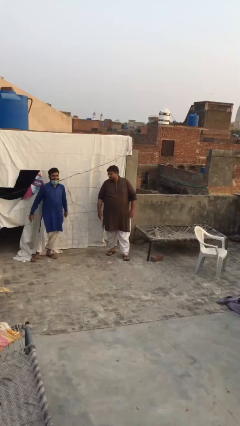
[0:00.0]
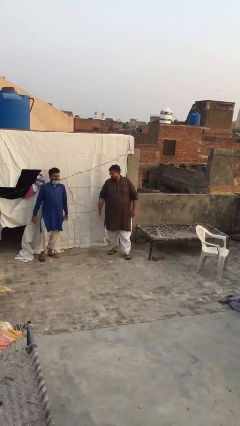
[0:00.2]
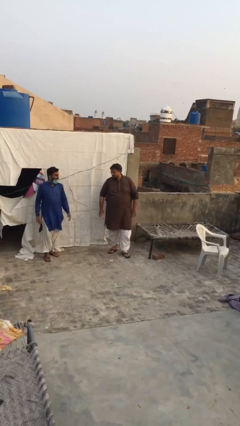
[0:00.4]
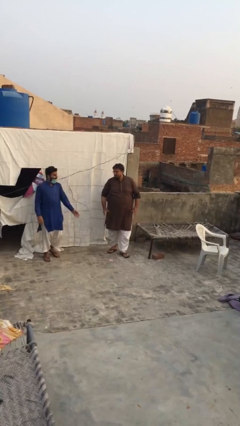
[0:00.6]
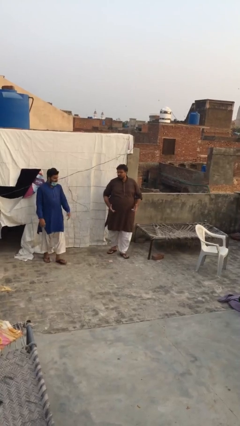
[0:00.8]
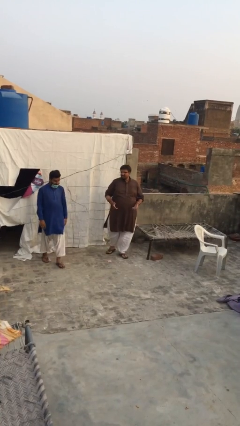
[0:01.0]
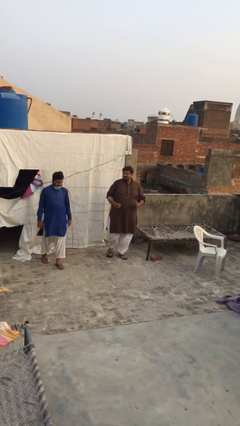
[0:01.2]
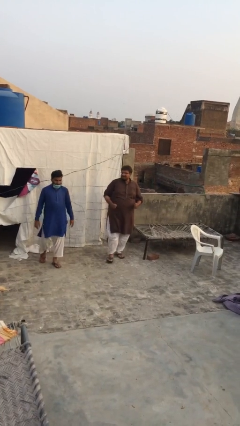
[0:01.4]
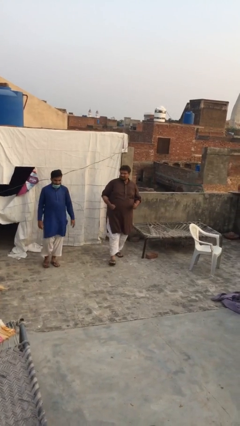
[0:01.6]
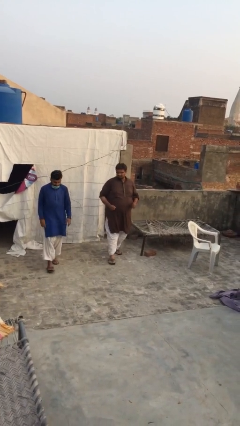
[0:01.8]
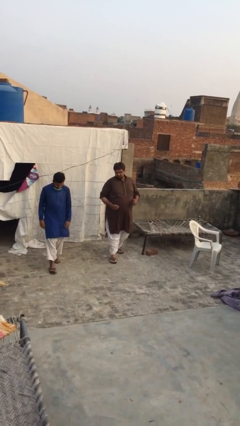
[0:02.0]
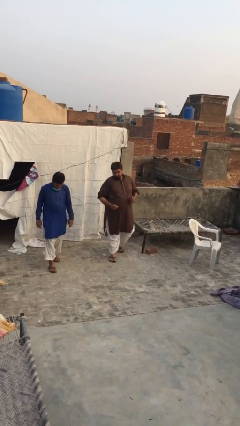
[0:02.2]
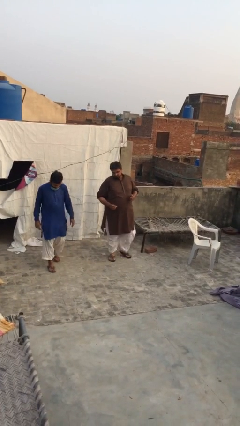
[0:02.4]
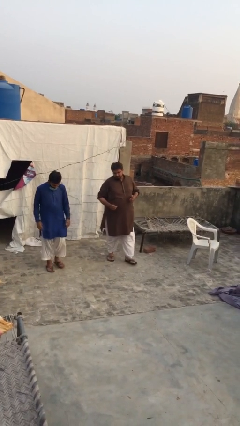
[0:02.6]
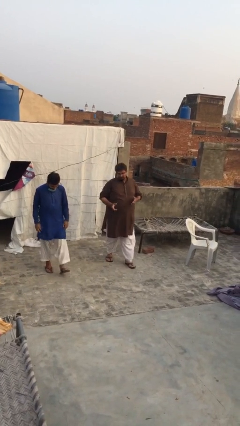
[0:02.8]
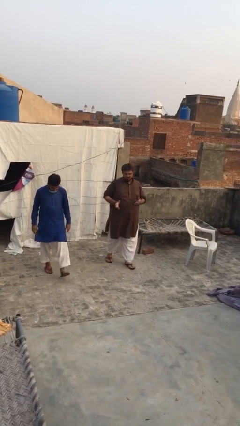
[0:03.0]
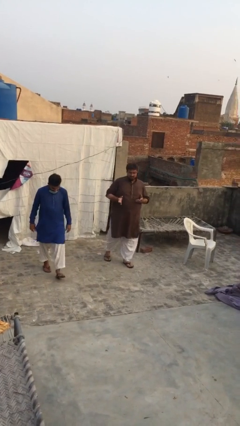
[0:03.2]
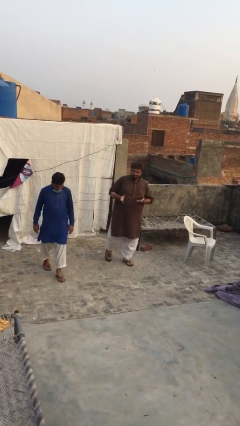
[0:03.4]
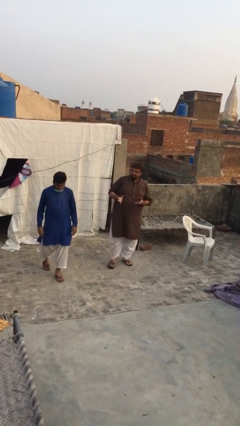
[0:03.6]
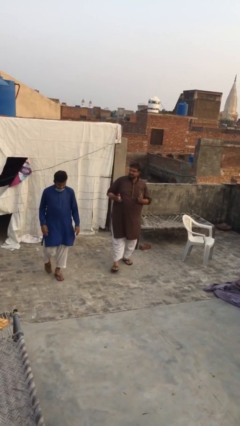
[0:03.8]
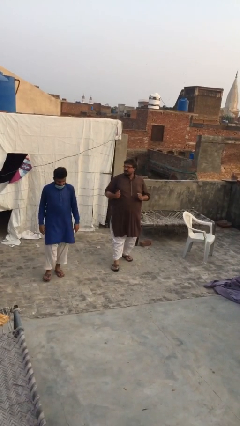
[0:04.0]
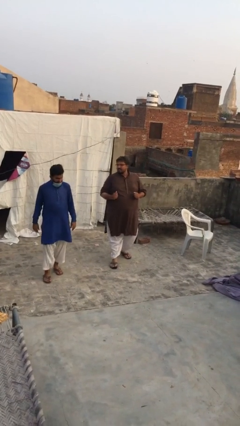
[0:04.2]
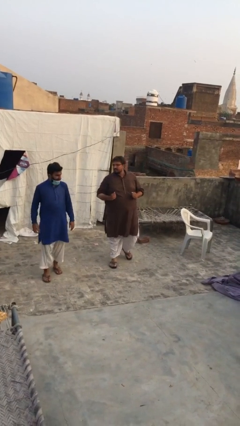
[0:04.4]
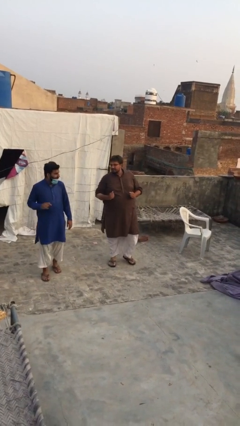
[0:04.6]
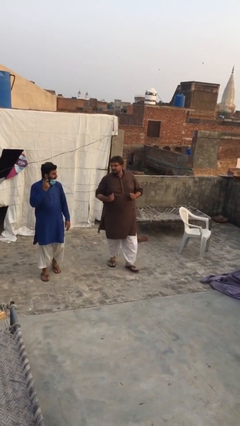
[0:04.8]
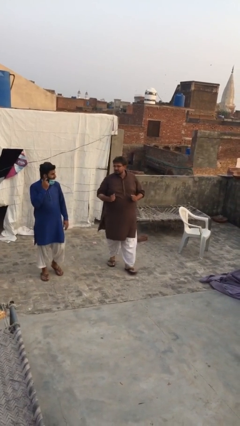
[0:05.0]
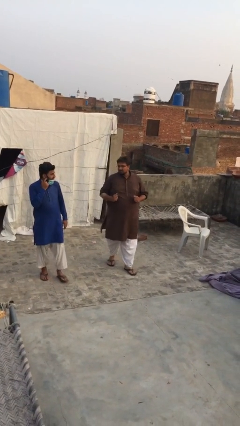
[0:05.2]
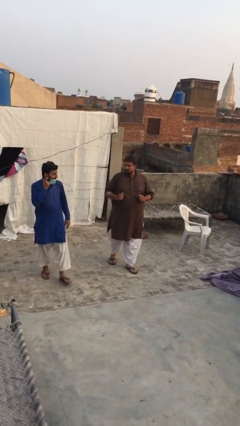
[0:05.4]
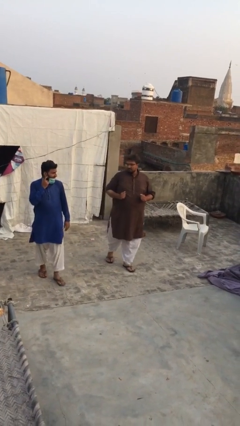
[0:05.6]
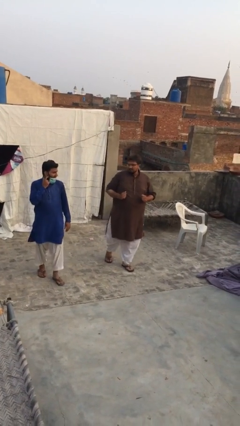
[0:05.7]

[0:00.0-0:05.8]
person talks to person

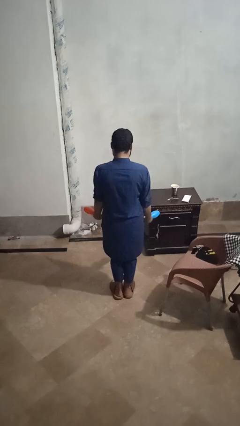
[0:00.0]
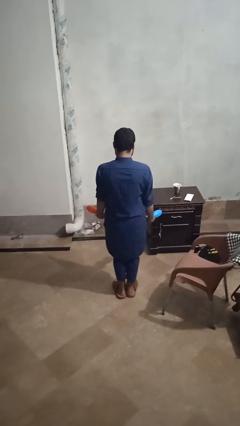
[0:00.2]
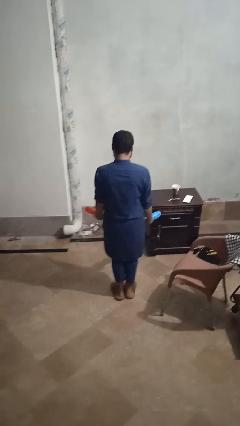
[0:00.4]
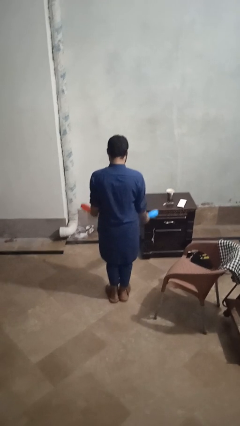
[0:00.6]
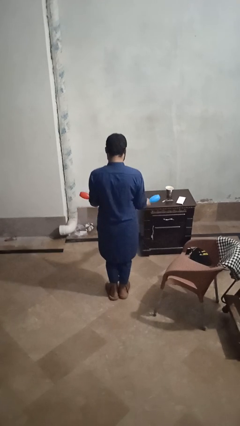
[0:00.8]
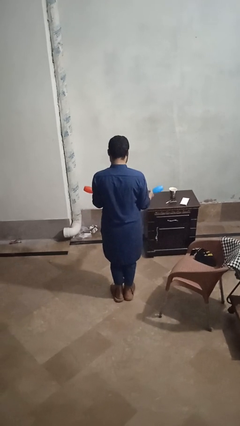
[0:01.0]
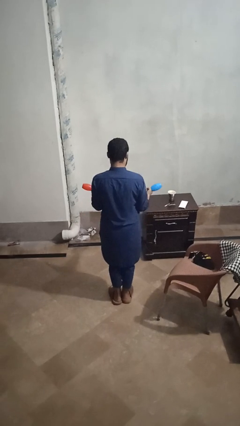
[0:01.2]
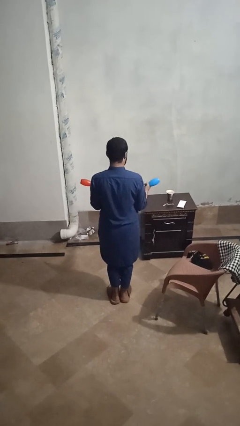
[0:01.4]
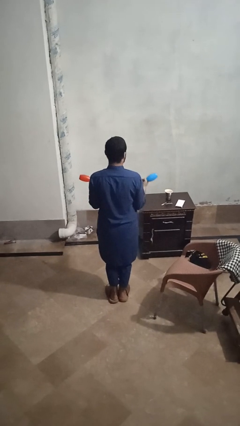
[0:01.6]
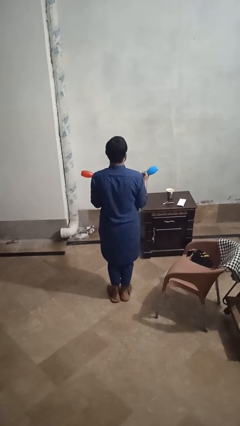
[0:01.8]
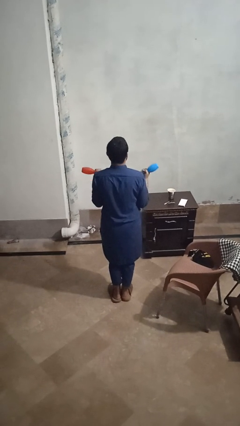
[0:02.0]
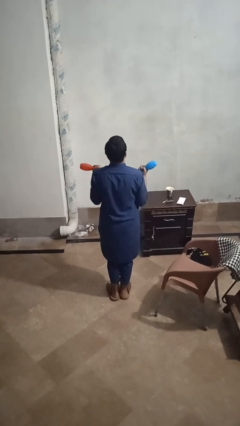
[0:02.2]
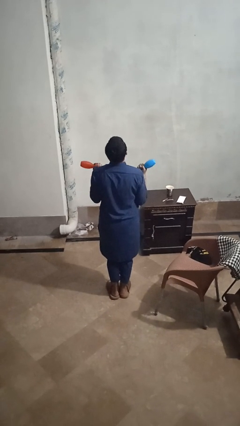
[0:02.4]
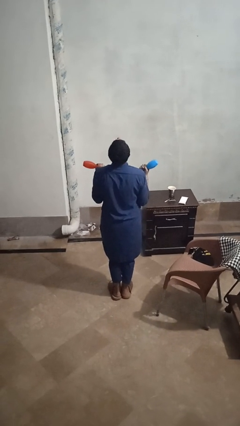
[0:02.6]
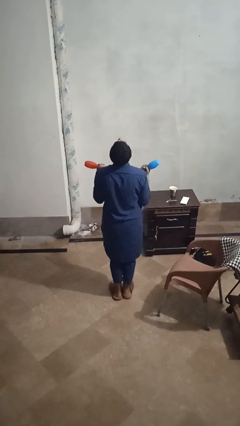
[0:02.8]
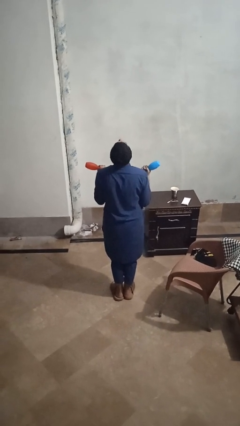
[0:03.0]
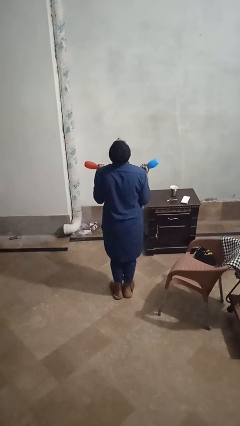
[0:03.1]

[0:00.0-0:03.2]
person lifts dumbbells

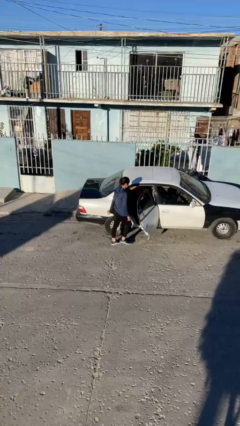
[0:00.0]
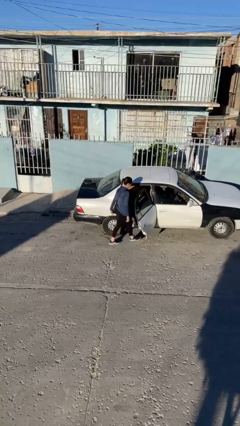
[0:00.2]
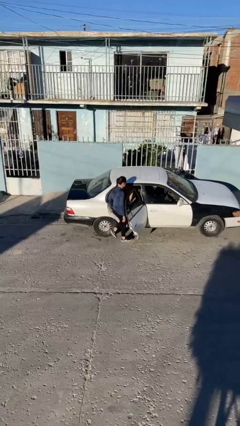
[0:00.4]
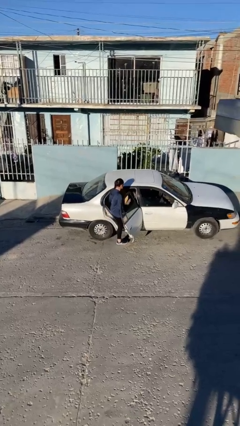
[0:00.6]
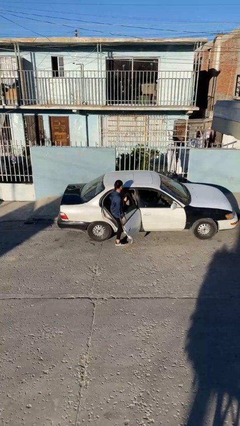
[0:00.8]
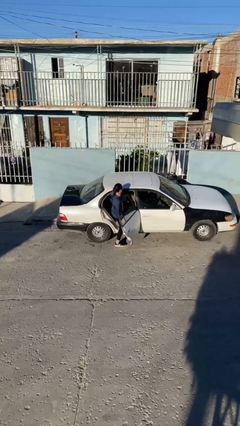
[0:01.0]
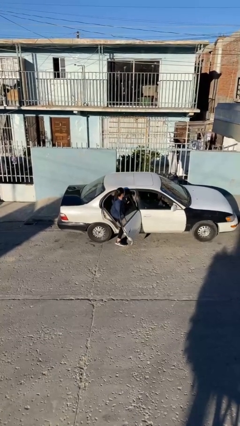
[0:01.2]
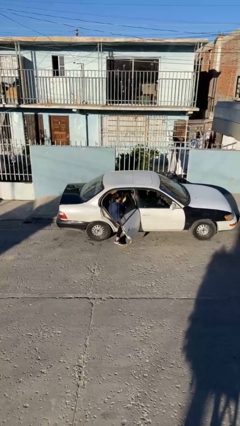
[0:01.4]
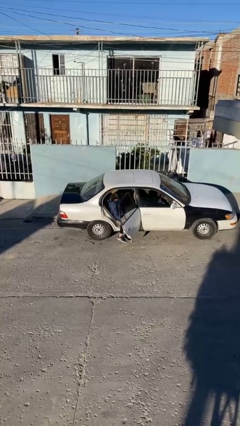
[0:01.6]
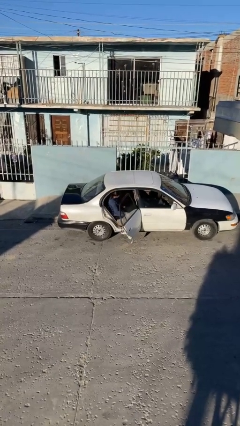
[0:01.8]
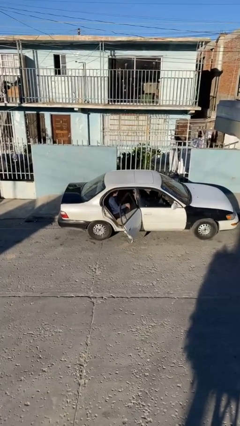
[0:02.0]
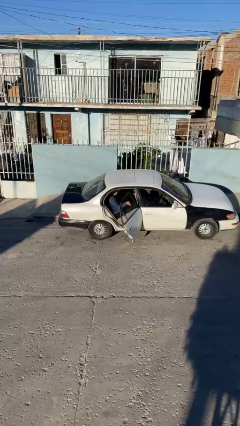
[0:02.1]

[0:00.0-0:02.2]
person enters car

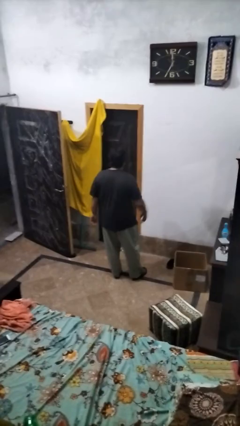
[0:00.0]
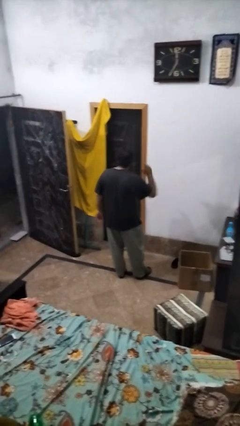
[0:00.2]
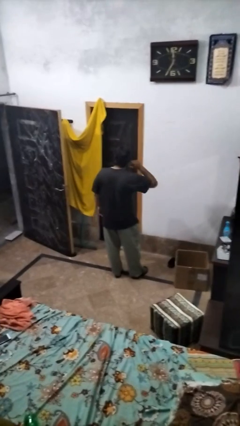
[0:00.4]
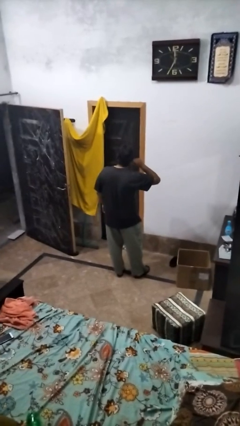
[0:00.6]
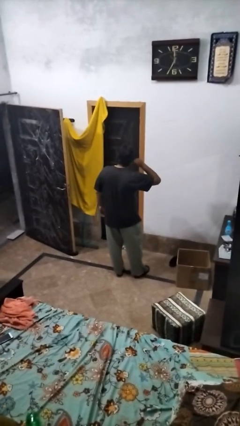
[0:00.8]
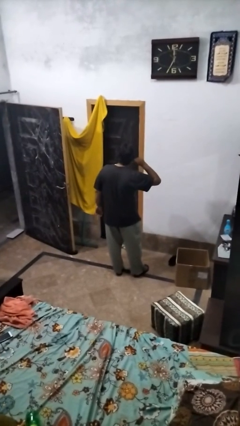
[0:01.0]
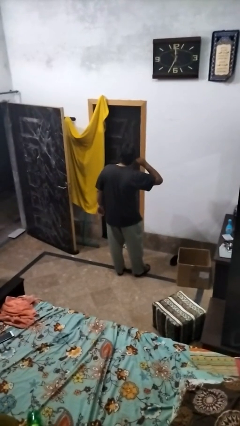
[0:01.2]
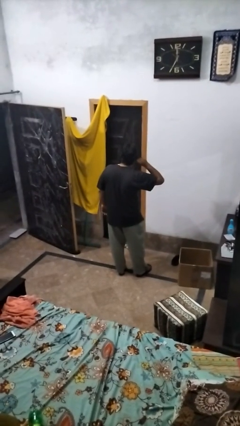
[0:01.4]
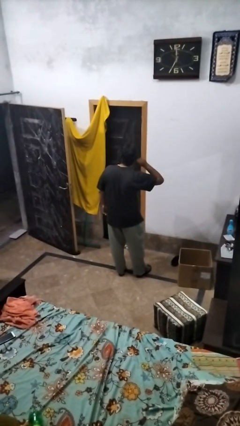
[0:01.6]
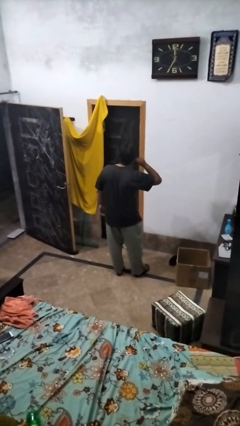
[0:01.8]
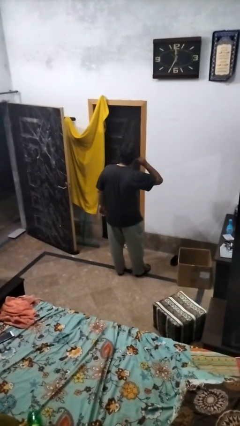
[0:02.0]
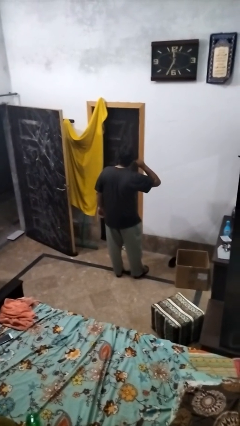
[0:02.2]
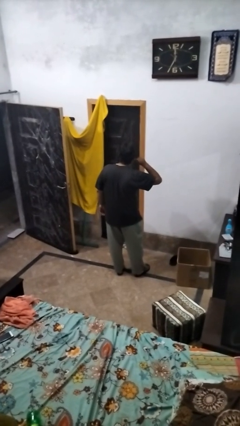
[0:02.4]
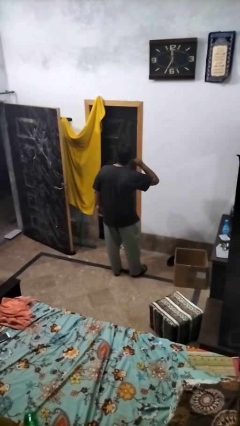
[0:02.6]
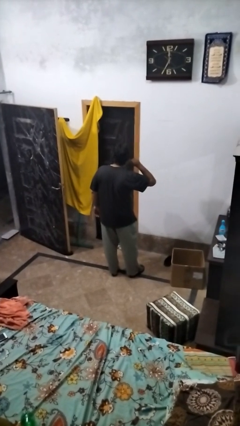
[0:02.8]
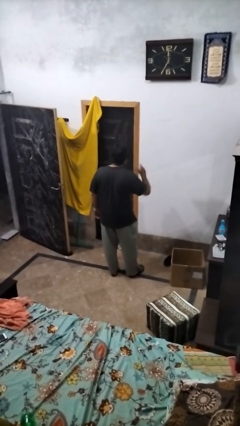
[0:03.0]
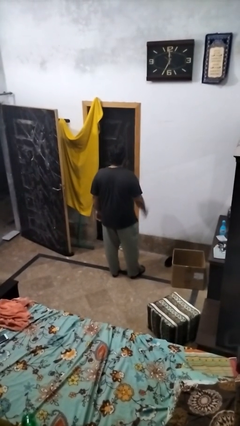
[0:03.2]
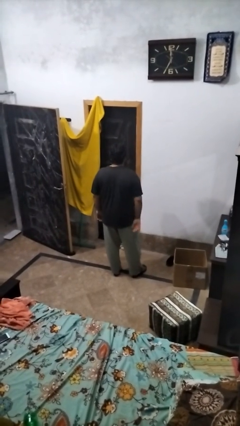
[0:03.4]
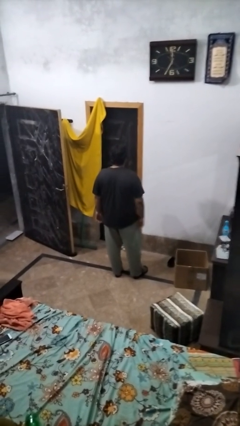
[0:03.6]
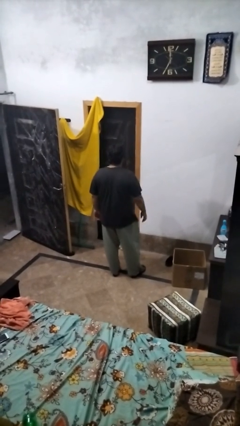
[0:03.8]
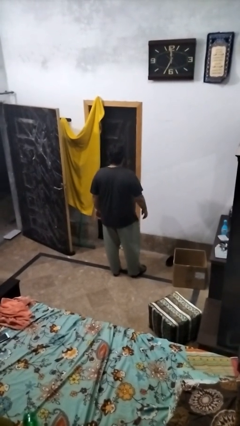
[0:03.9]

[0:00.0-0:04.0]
person gestures listen closely

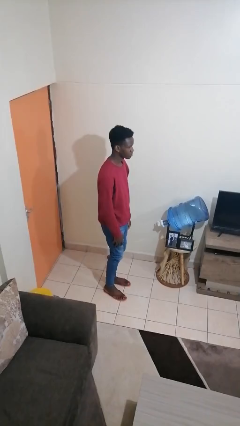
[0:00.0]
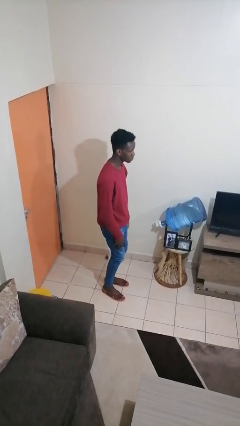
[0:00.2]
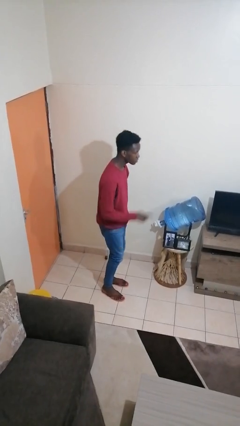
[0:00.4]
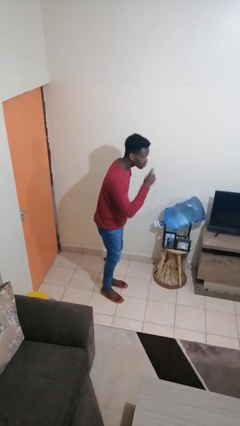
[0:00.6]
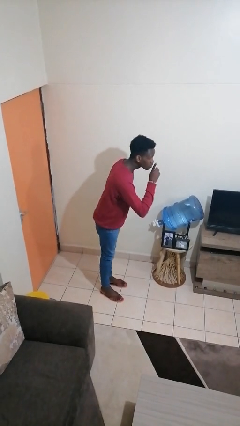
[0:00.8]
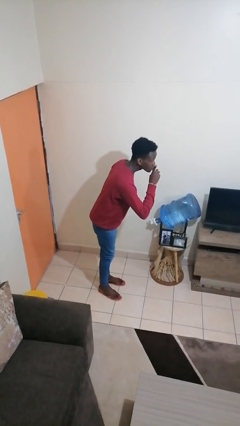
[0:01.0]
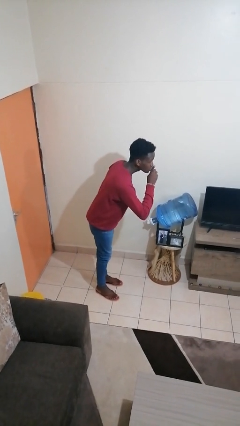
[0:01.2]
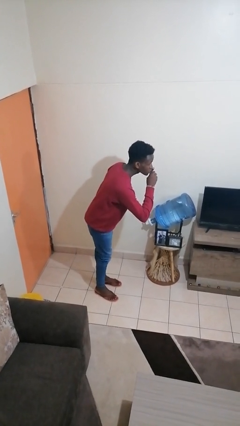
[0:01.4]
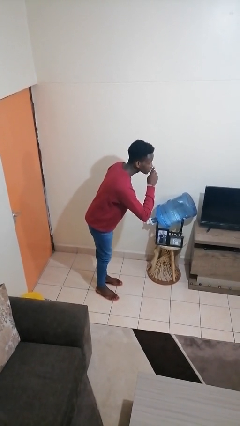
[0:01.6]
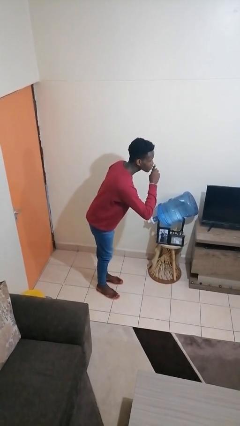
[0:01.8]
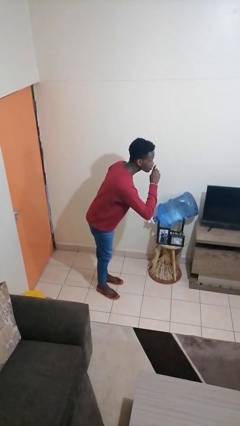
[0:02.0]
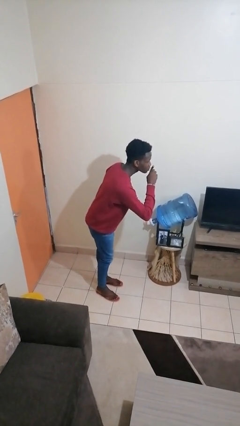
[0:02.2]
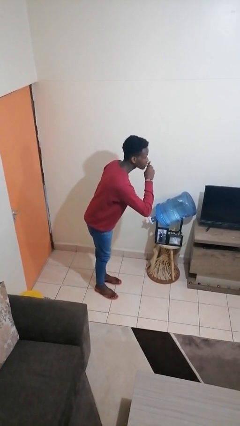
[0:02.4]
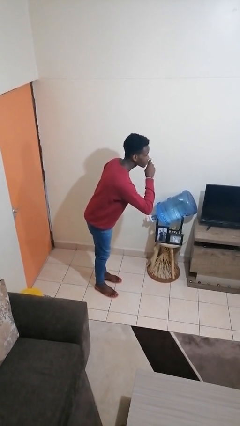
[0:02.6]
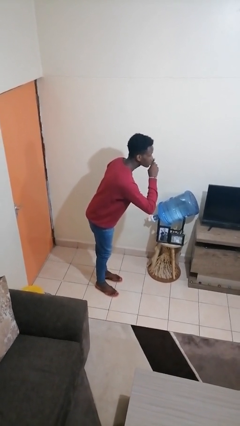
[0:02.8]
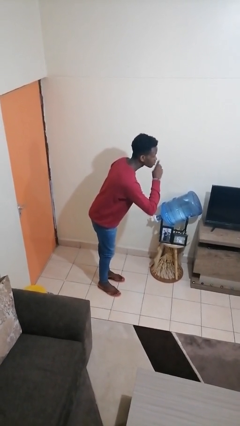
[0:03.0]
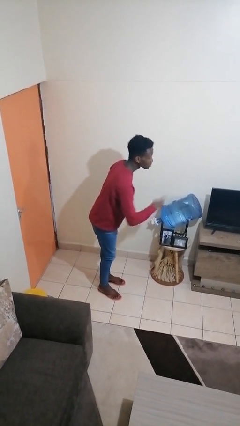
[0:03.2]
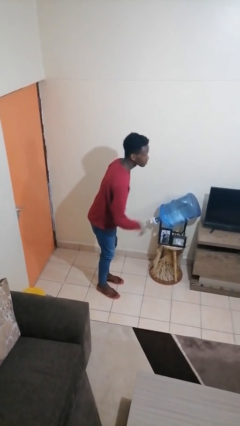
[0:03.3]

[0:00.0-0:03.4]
person gestures be quiet
